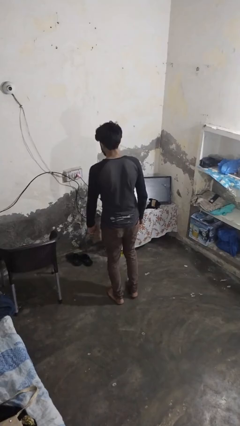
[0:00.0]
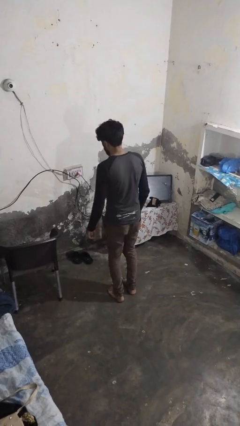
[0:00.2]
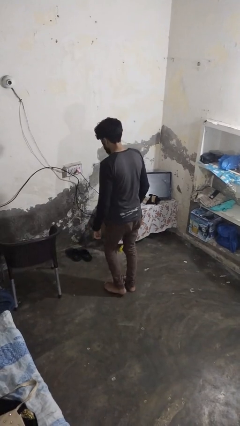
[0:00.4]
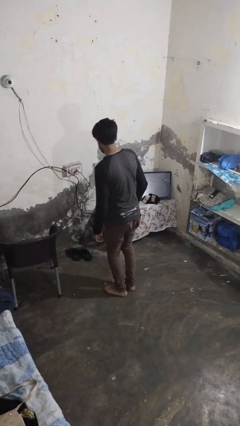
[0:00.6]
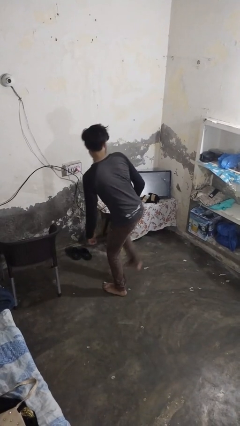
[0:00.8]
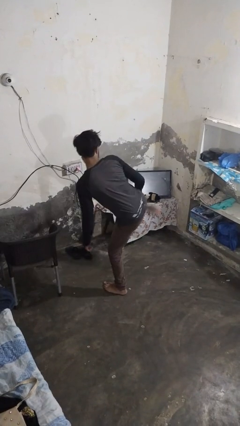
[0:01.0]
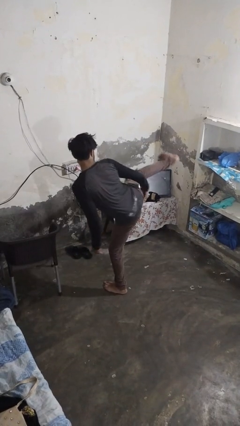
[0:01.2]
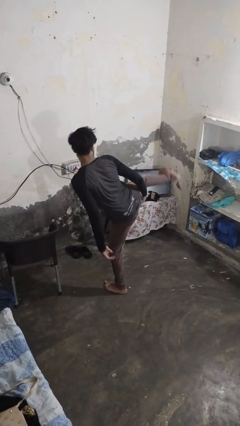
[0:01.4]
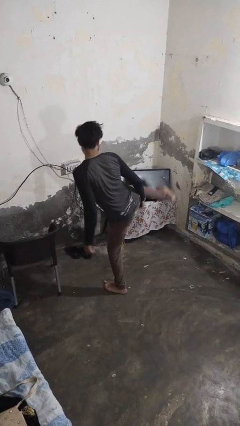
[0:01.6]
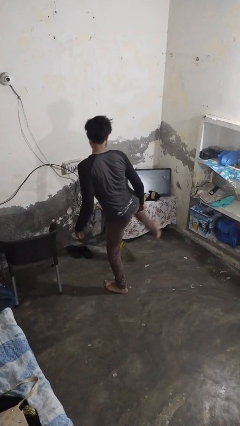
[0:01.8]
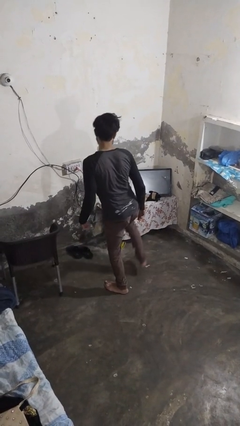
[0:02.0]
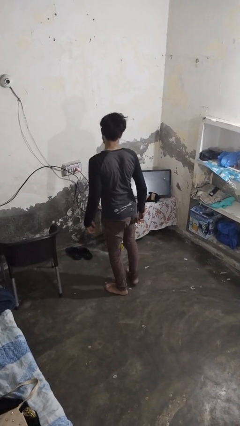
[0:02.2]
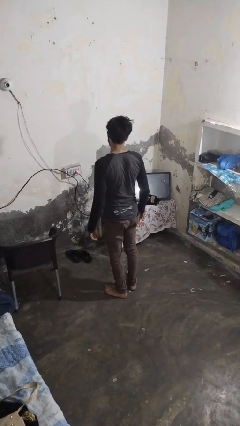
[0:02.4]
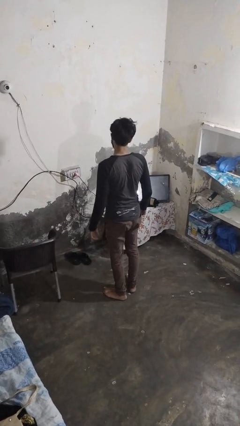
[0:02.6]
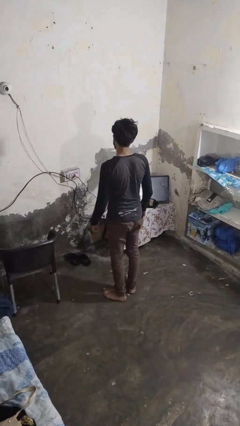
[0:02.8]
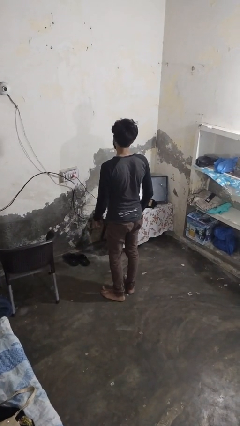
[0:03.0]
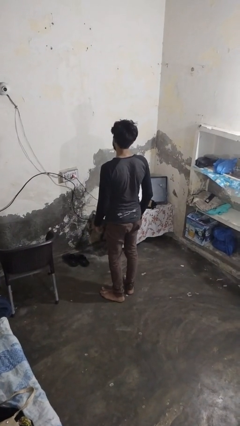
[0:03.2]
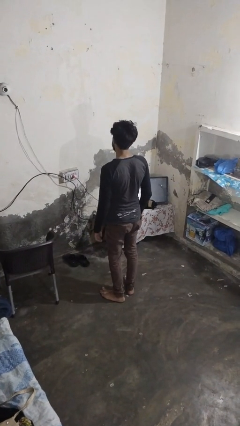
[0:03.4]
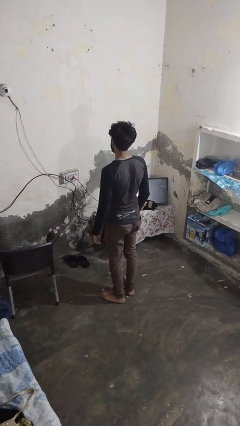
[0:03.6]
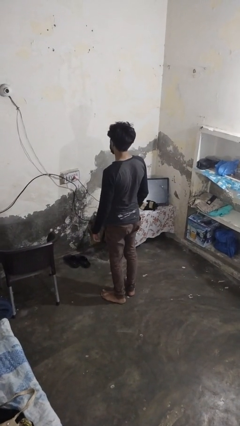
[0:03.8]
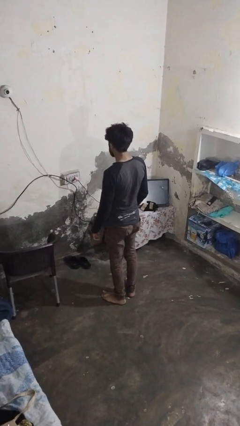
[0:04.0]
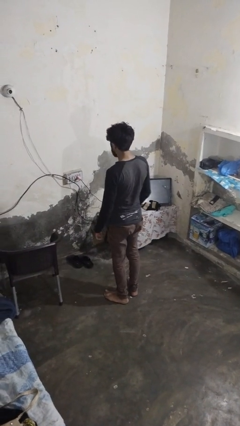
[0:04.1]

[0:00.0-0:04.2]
person karate kicks

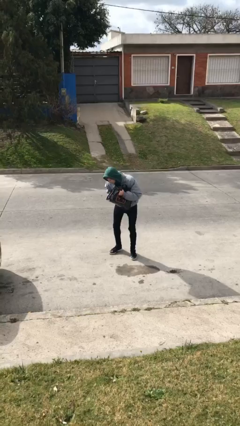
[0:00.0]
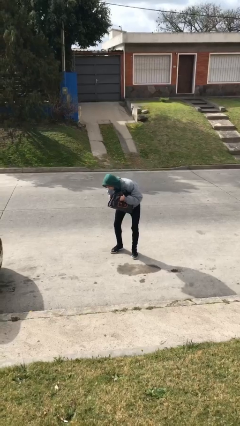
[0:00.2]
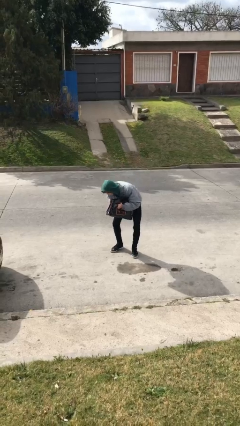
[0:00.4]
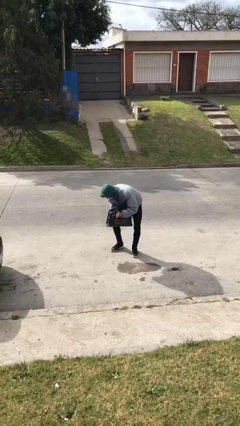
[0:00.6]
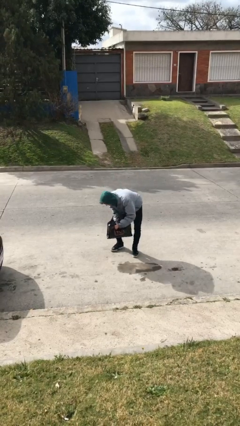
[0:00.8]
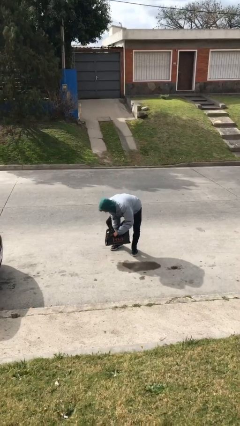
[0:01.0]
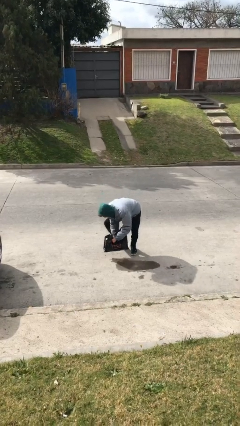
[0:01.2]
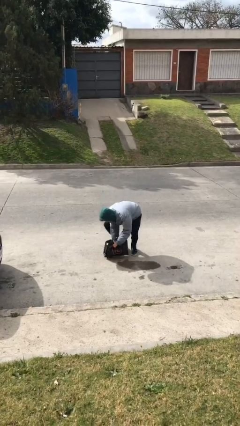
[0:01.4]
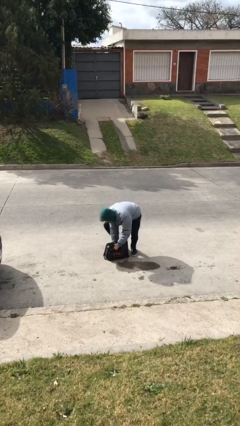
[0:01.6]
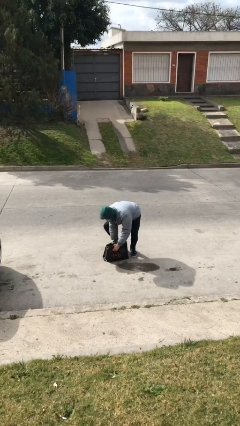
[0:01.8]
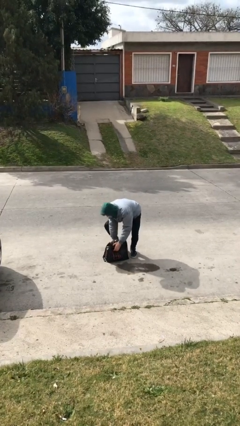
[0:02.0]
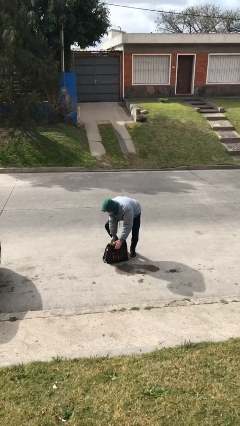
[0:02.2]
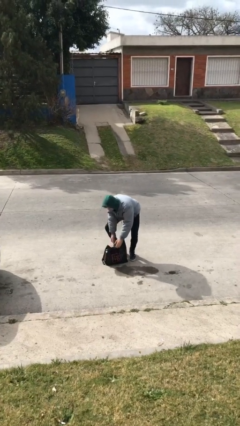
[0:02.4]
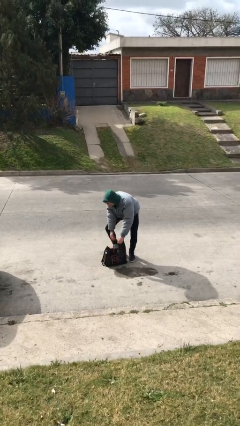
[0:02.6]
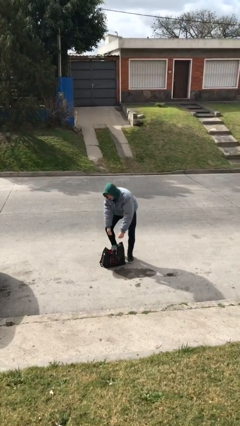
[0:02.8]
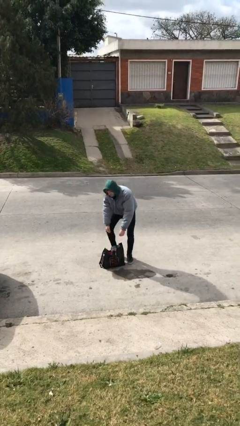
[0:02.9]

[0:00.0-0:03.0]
person puts down object on floor

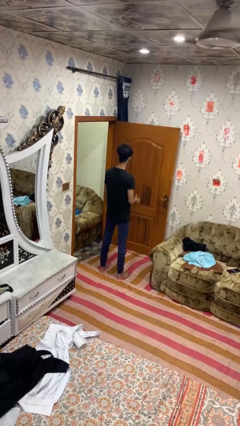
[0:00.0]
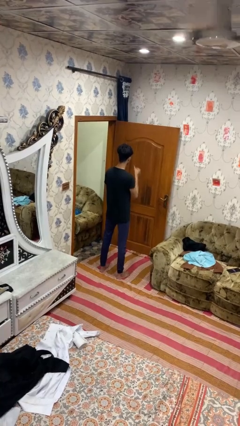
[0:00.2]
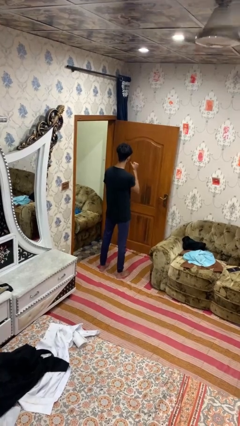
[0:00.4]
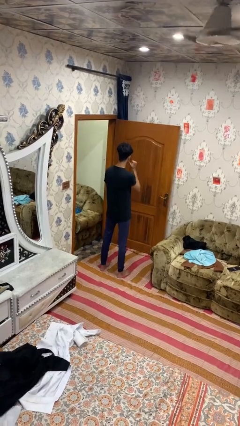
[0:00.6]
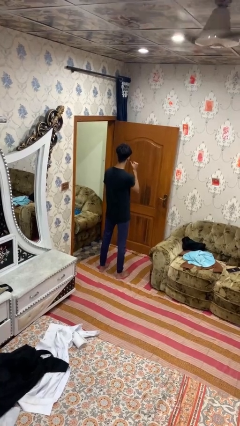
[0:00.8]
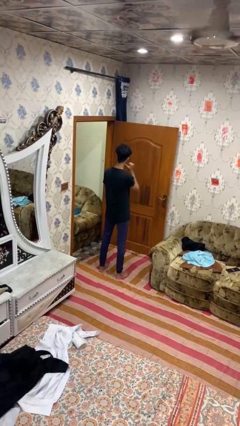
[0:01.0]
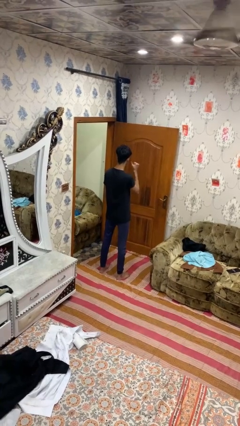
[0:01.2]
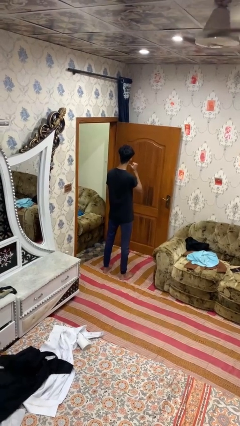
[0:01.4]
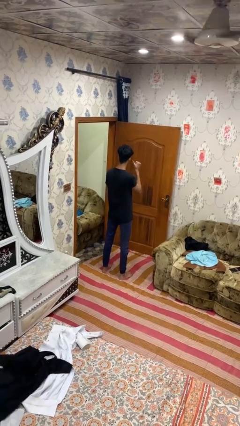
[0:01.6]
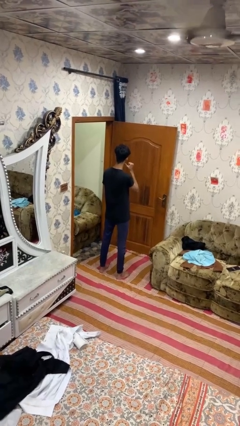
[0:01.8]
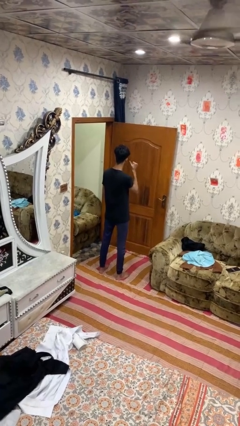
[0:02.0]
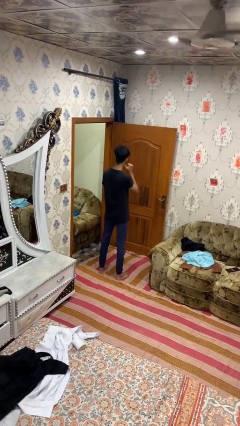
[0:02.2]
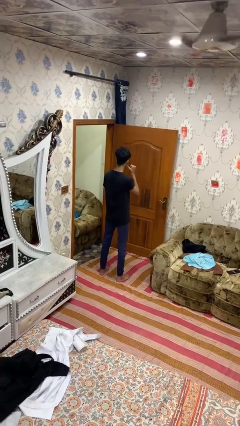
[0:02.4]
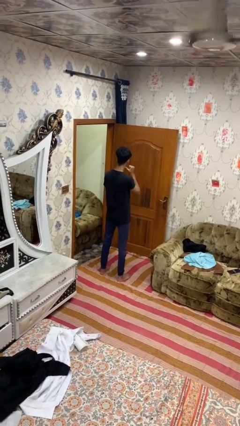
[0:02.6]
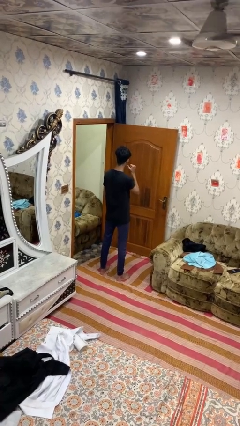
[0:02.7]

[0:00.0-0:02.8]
person gestures behind me

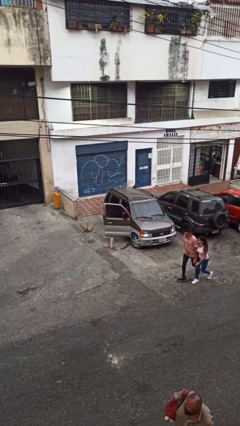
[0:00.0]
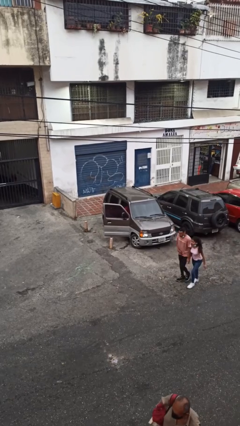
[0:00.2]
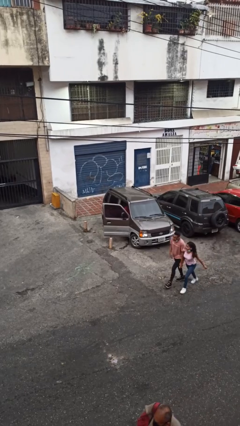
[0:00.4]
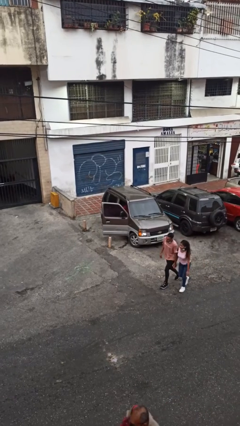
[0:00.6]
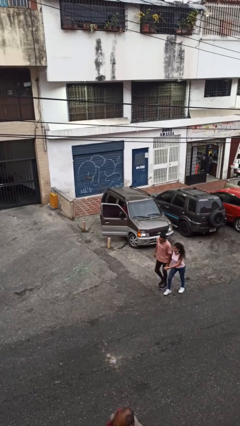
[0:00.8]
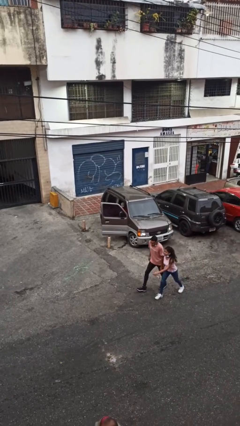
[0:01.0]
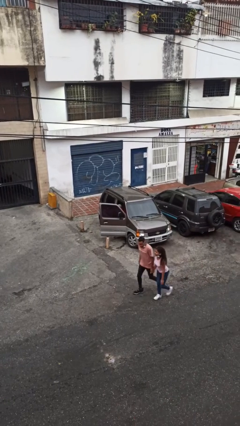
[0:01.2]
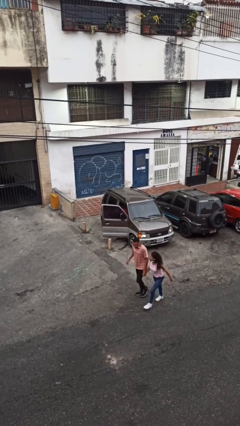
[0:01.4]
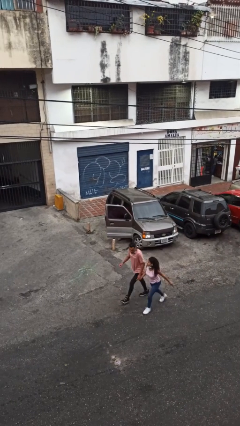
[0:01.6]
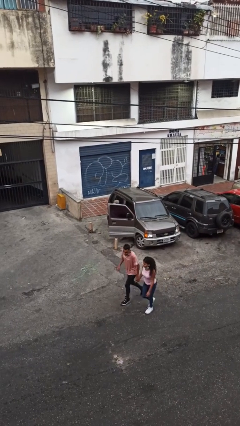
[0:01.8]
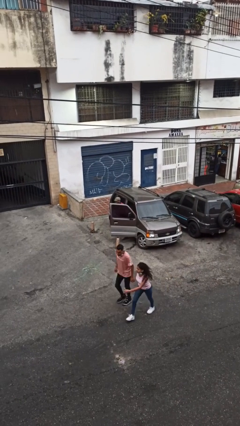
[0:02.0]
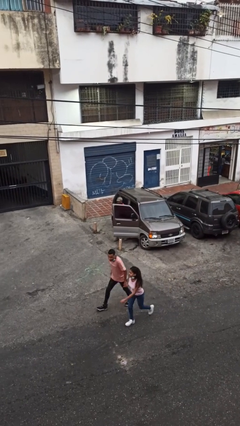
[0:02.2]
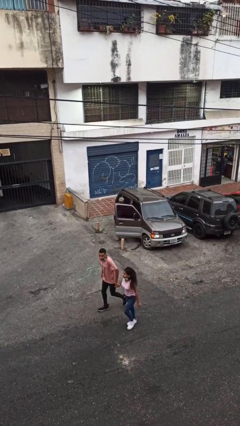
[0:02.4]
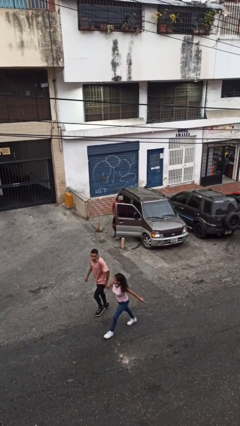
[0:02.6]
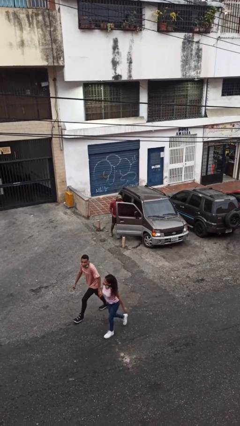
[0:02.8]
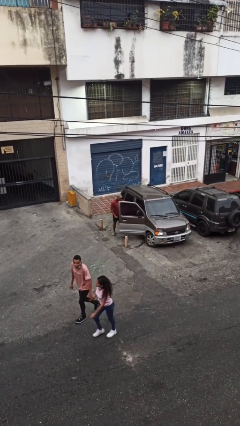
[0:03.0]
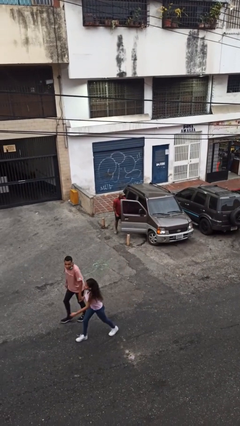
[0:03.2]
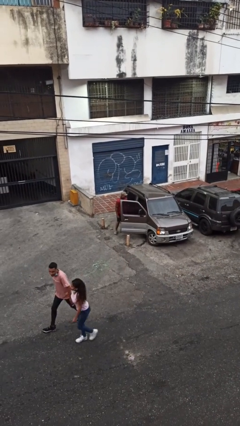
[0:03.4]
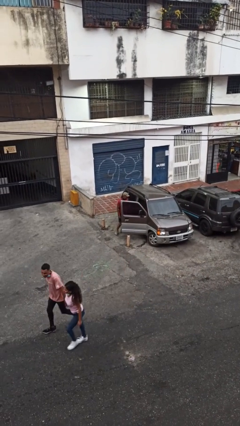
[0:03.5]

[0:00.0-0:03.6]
person exits car

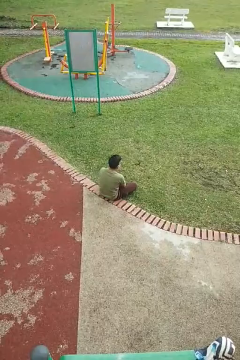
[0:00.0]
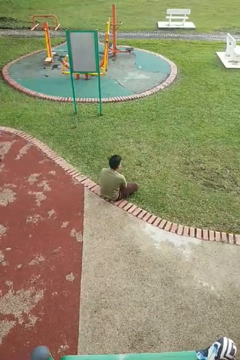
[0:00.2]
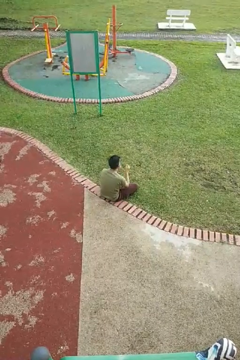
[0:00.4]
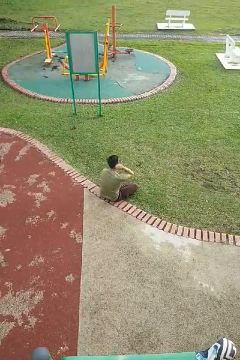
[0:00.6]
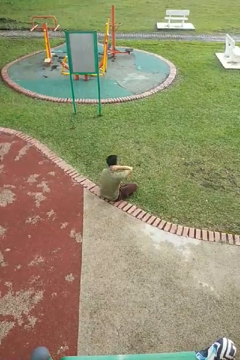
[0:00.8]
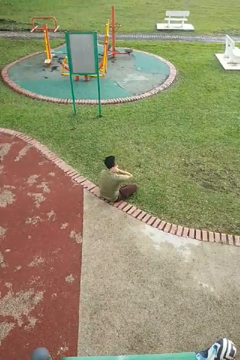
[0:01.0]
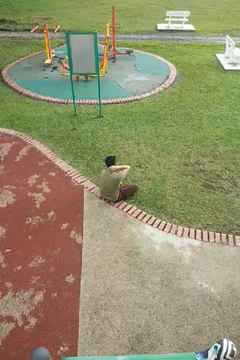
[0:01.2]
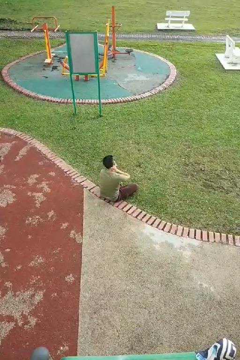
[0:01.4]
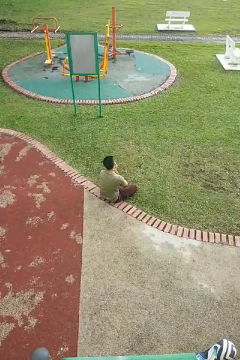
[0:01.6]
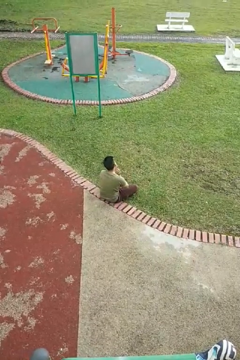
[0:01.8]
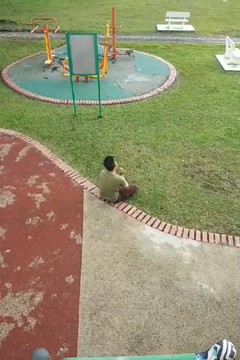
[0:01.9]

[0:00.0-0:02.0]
person rubs neck

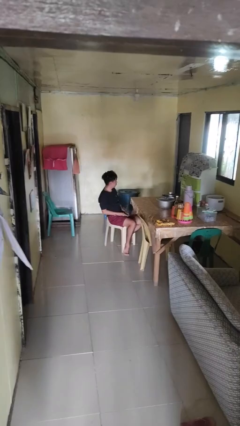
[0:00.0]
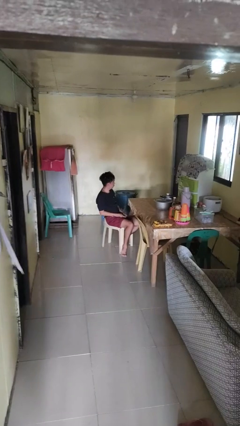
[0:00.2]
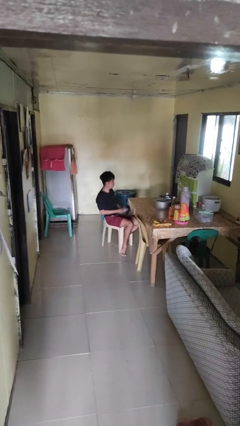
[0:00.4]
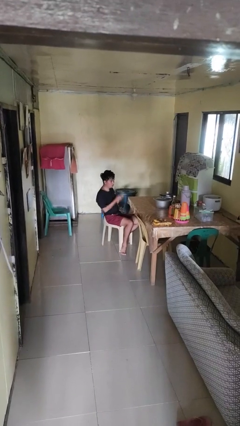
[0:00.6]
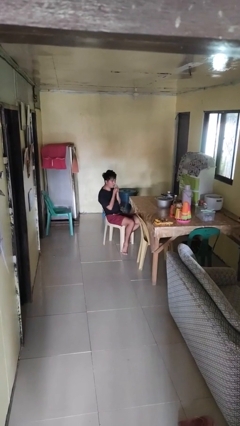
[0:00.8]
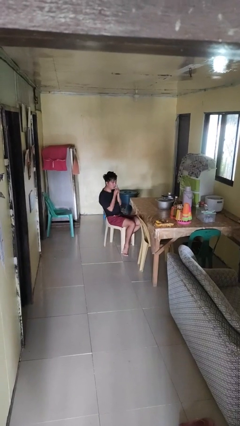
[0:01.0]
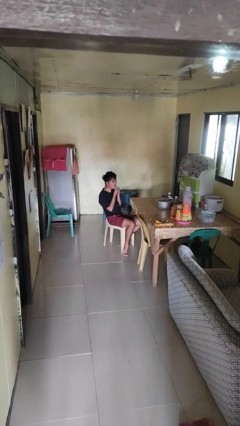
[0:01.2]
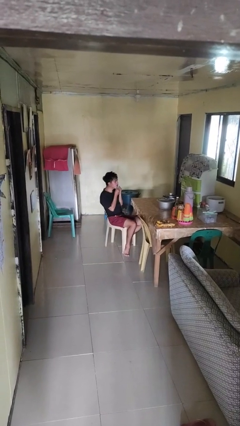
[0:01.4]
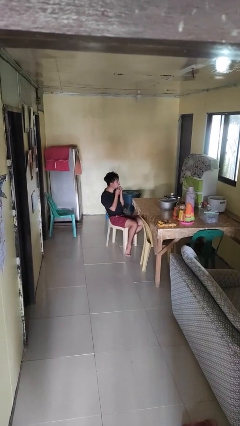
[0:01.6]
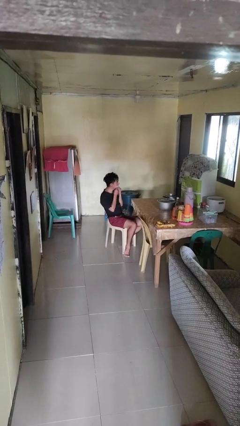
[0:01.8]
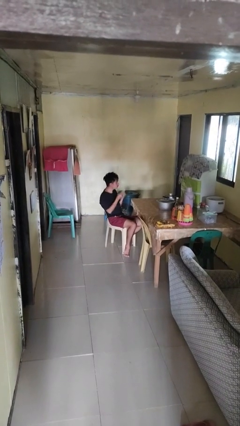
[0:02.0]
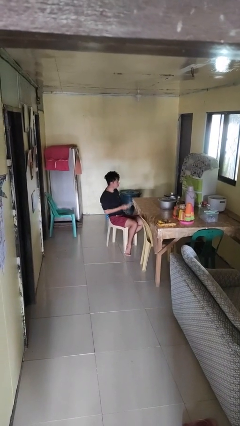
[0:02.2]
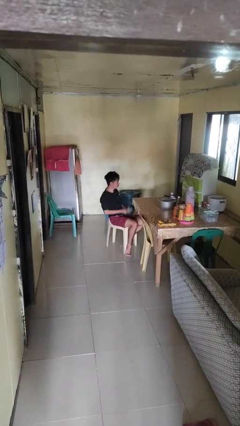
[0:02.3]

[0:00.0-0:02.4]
person wipes mouth with napkin
